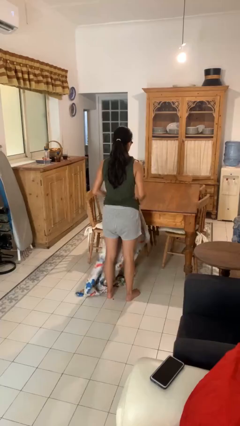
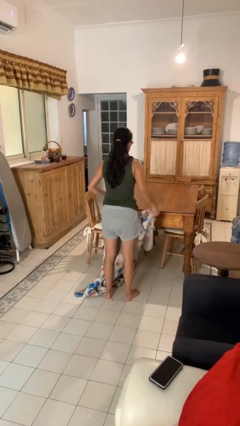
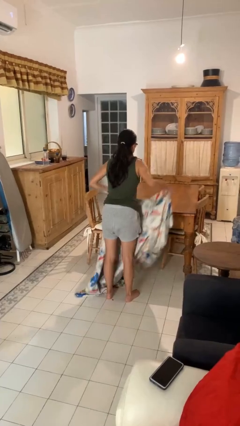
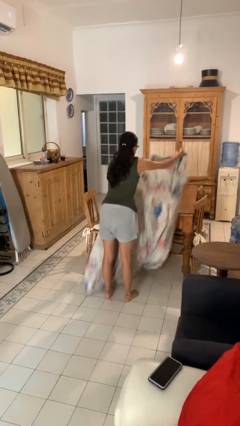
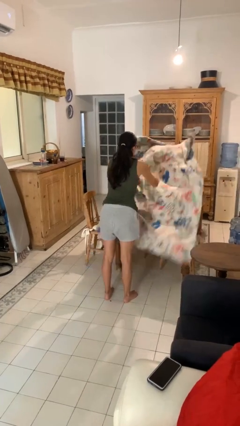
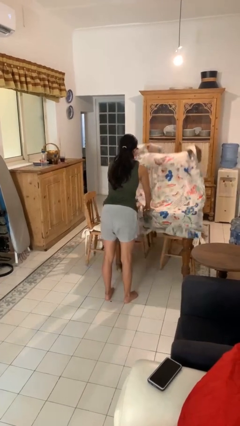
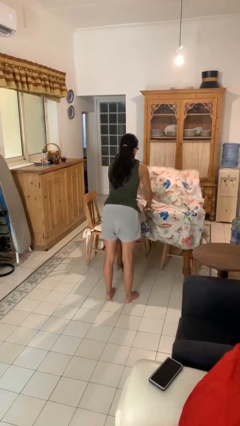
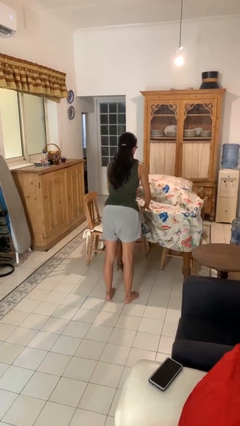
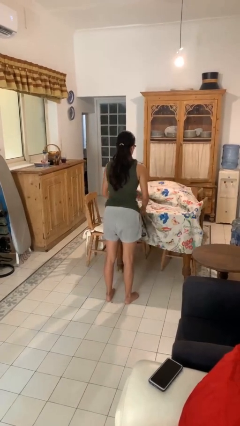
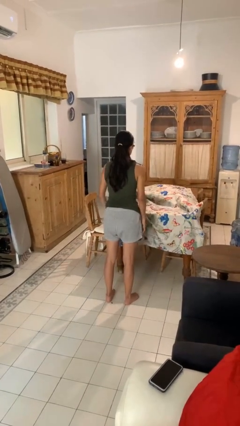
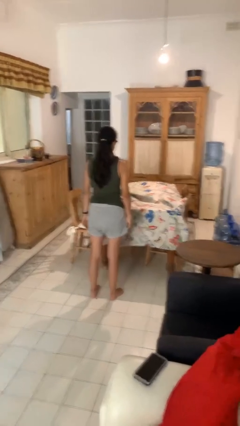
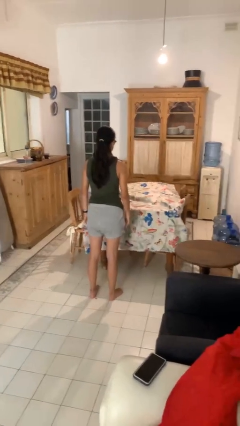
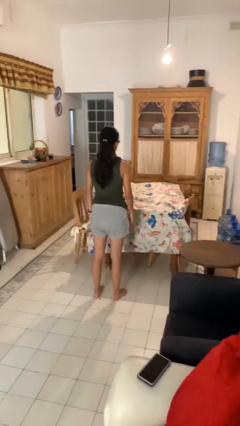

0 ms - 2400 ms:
person spreads tablecloth

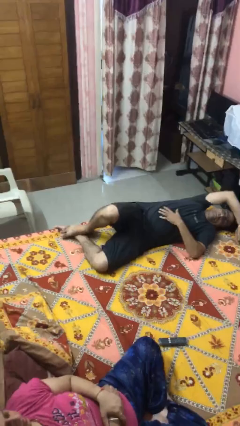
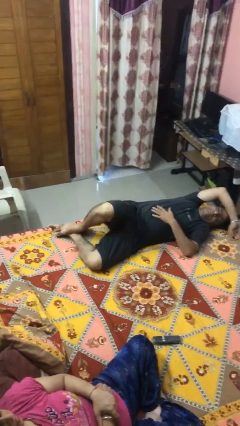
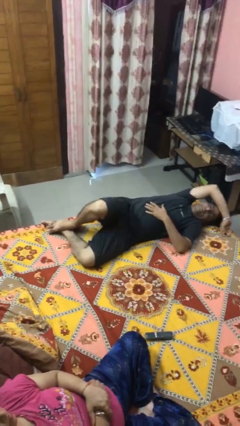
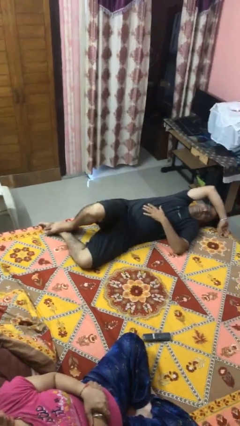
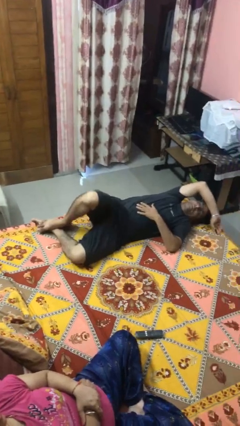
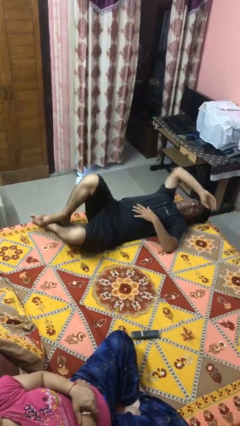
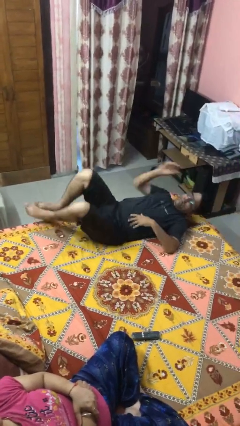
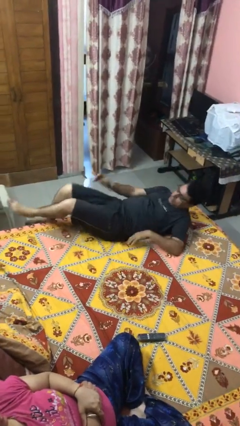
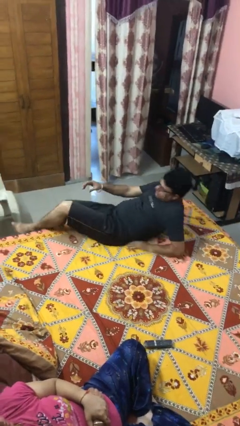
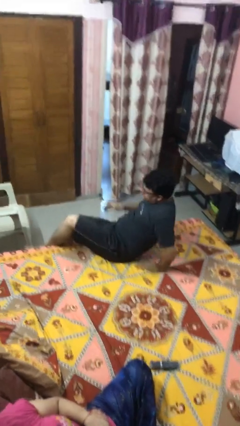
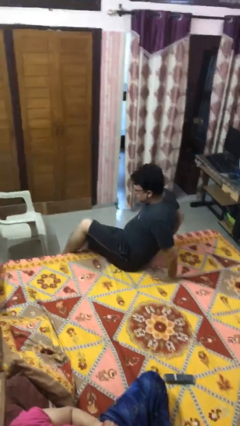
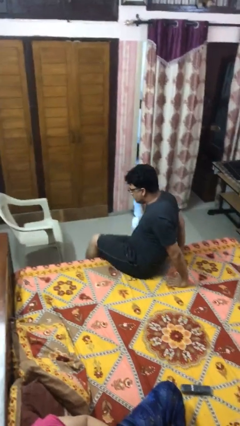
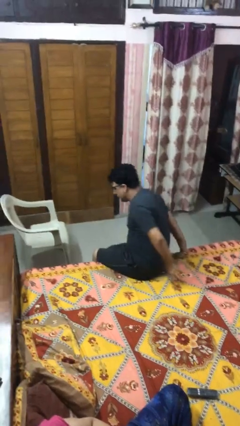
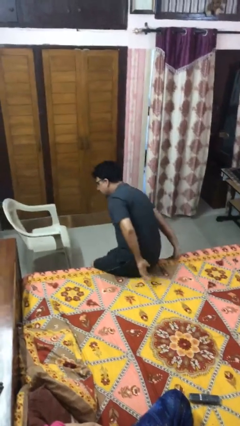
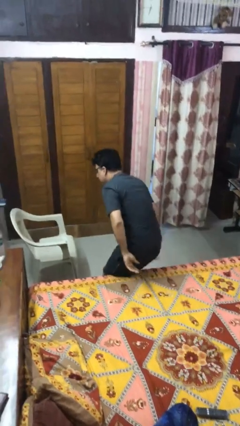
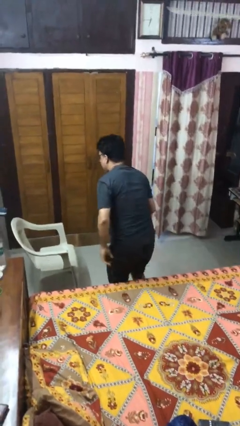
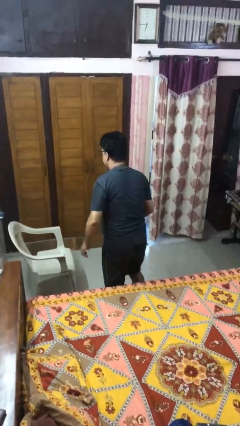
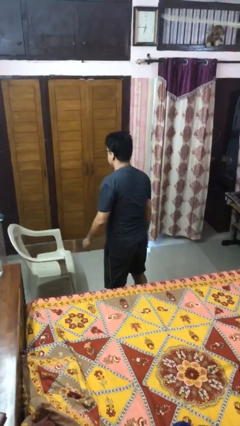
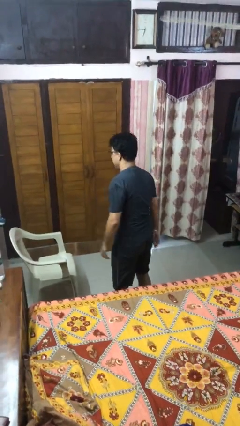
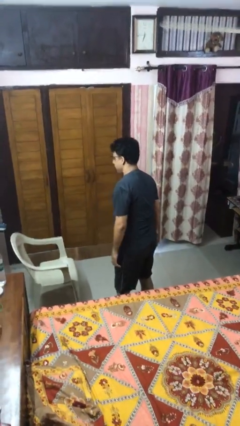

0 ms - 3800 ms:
person stands up

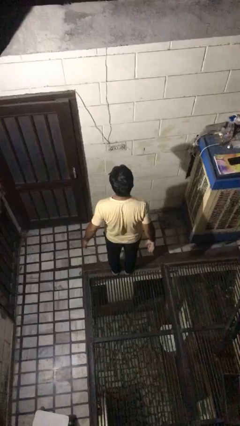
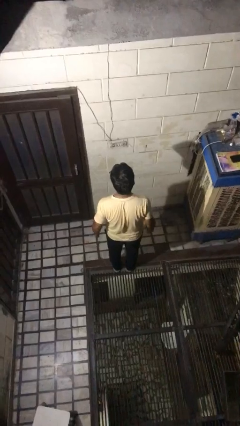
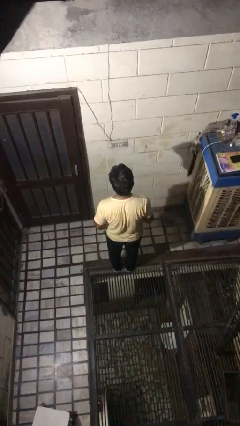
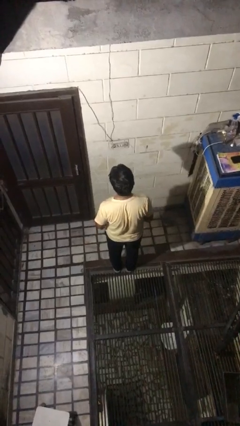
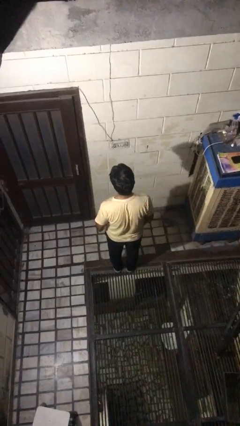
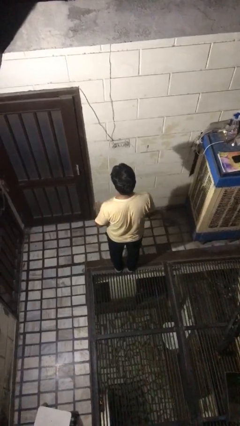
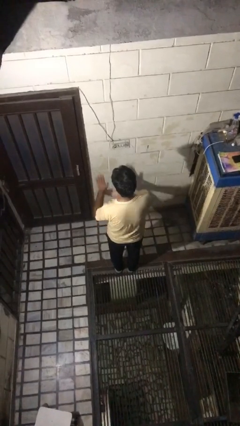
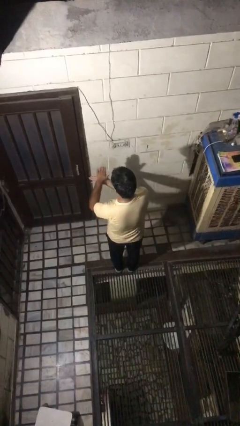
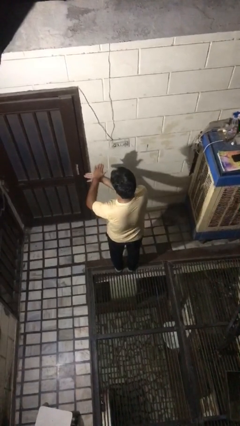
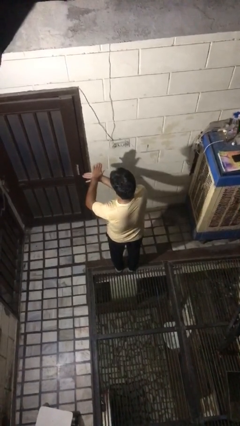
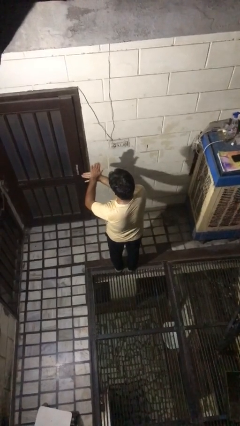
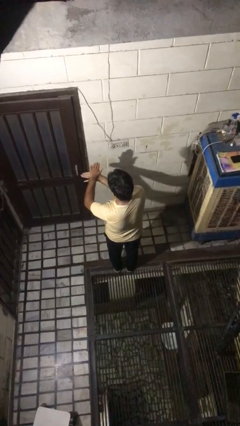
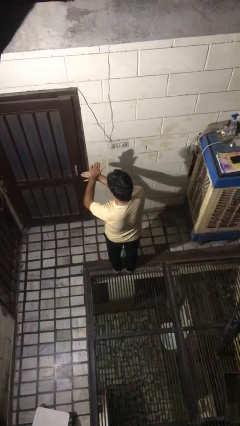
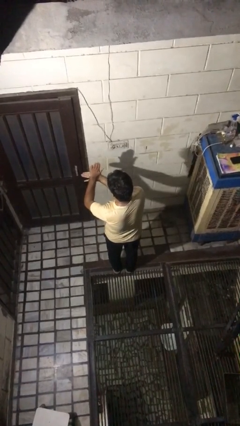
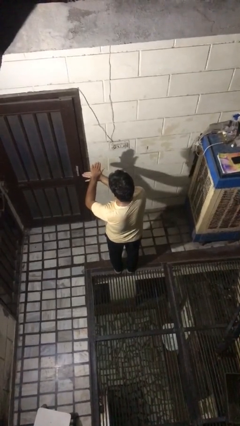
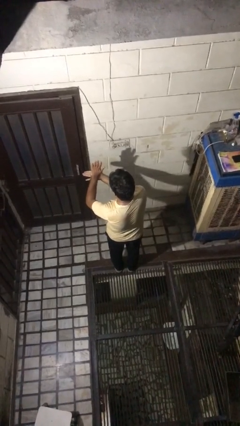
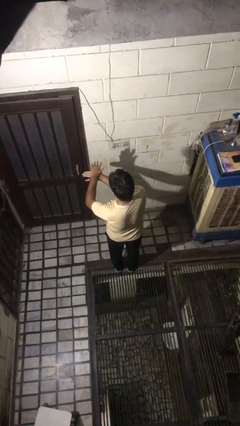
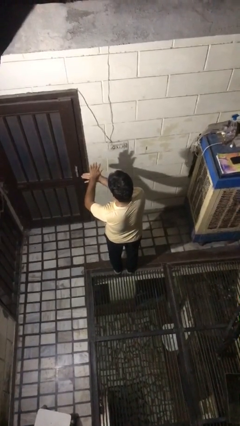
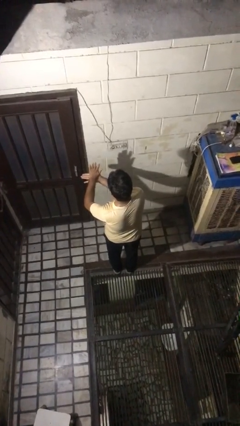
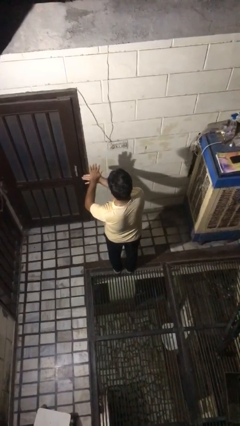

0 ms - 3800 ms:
person gestures number five

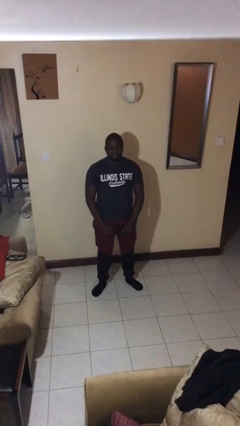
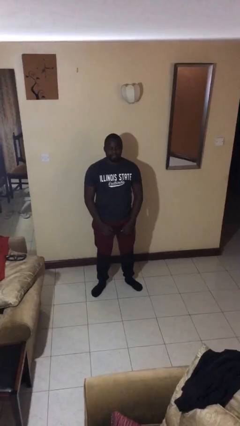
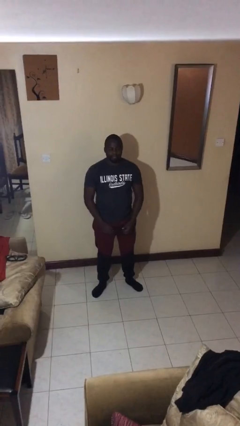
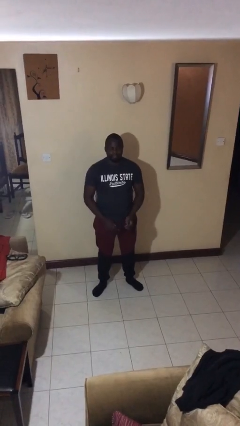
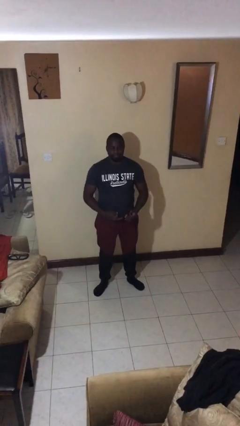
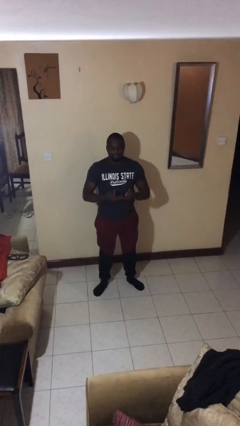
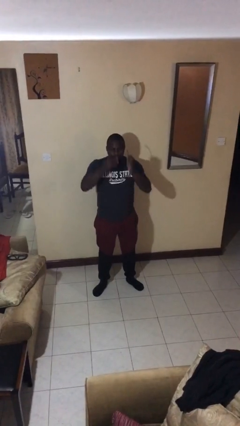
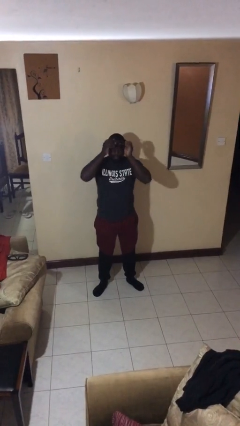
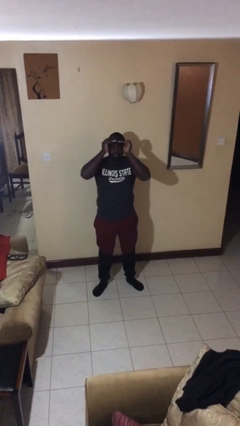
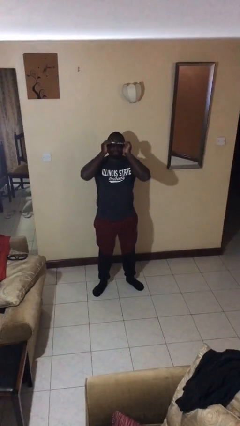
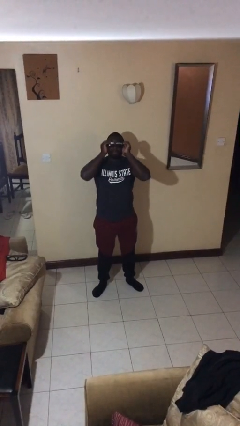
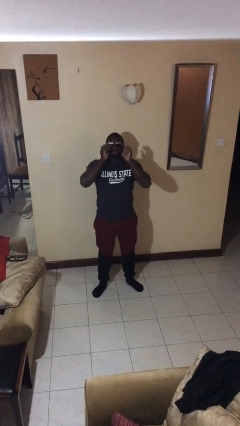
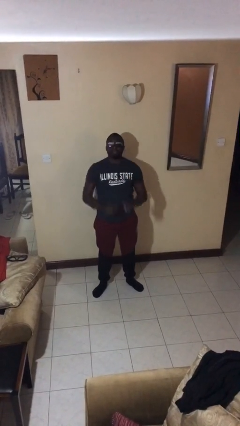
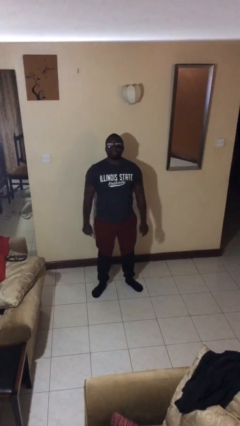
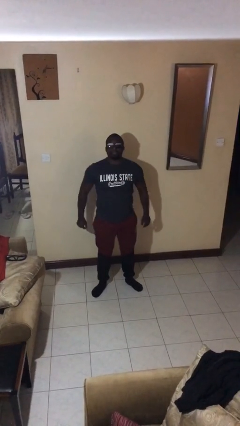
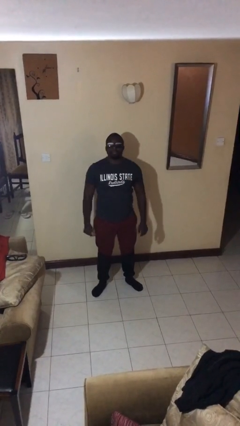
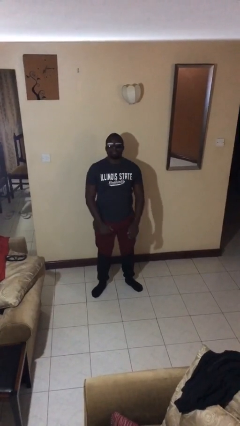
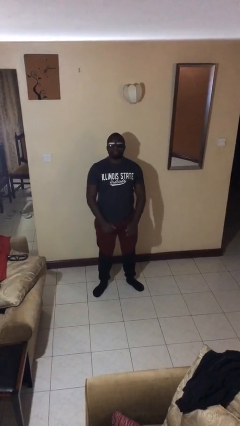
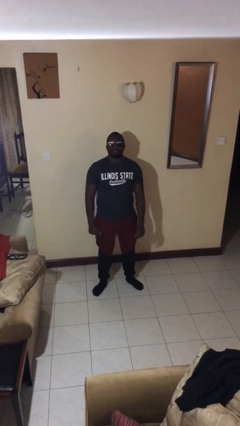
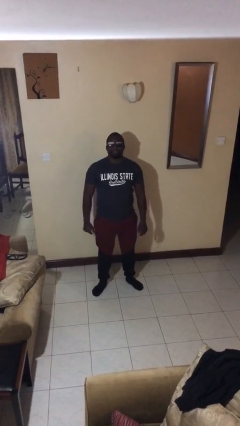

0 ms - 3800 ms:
person puts on sunglasses

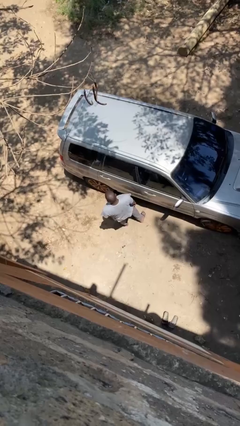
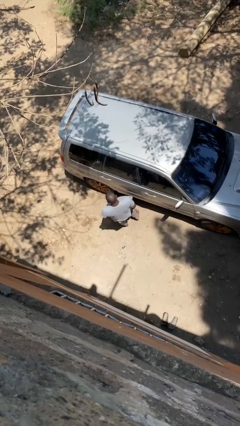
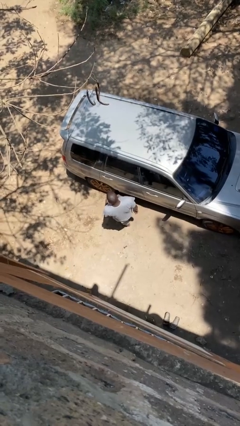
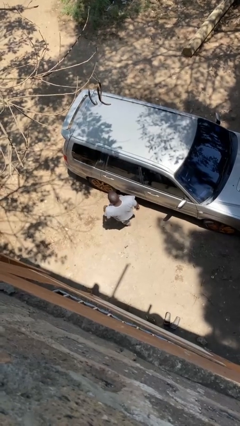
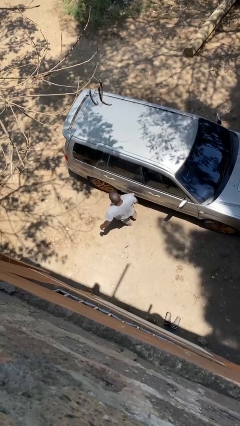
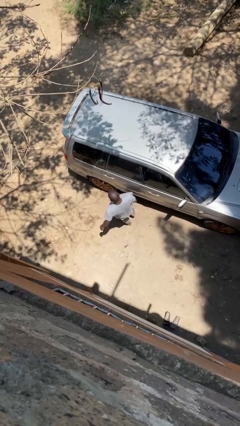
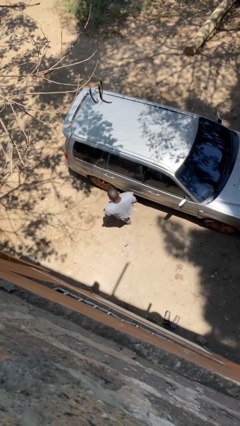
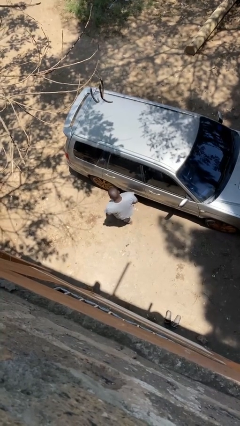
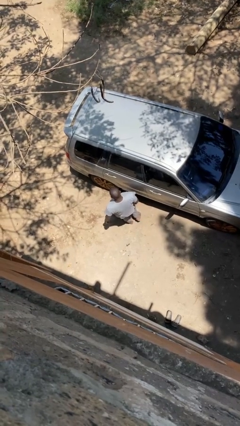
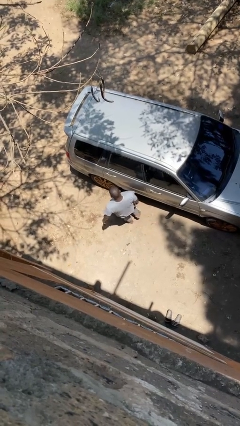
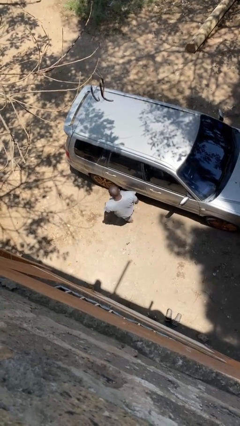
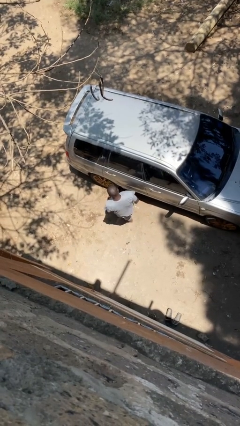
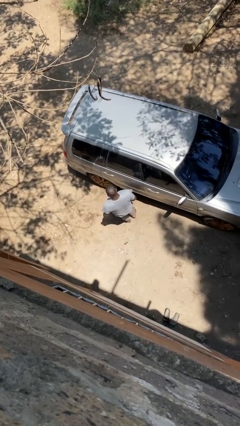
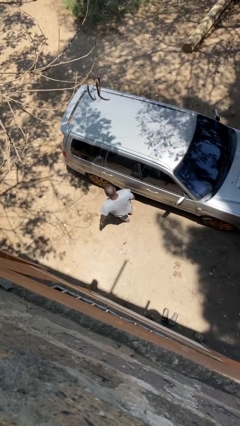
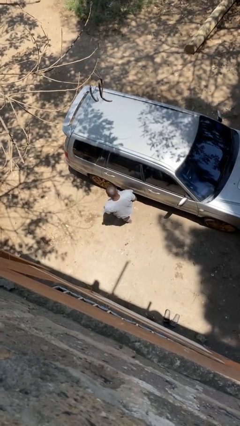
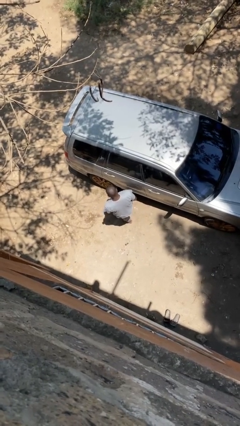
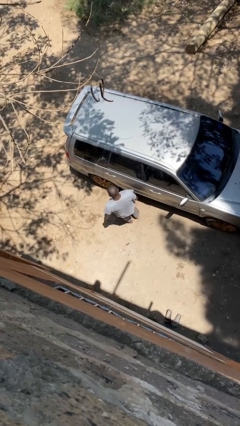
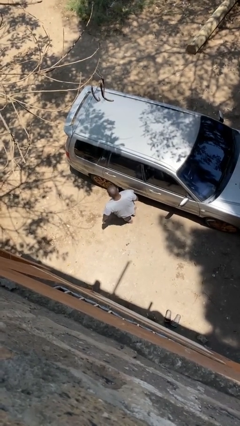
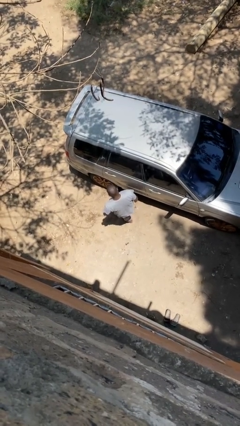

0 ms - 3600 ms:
person kicks car tires
